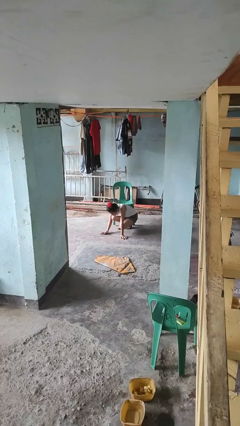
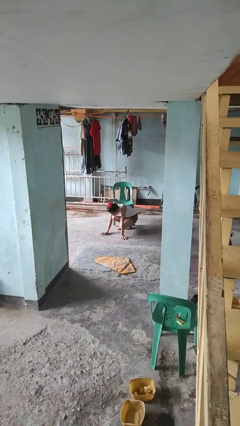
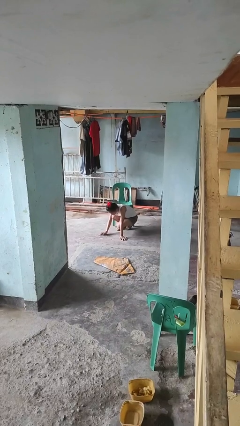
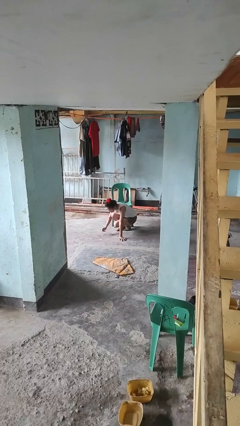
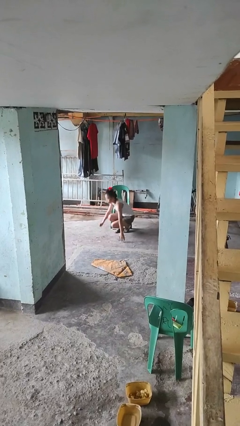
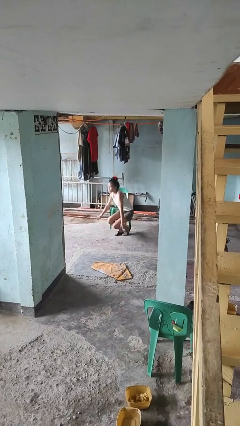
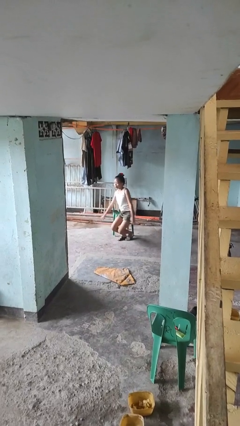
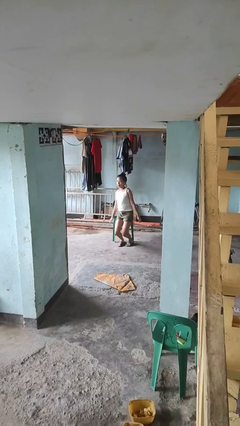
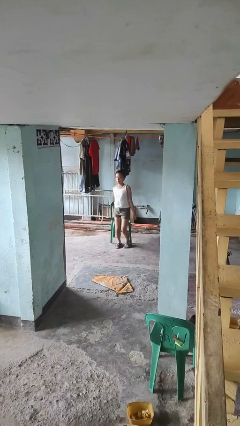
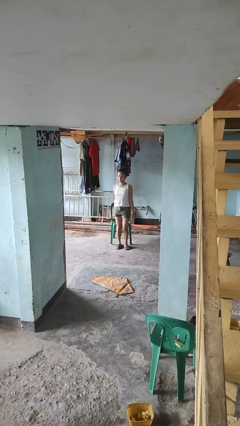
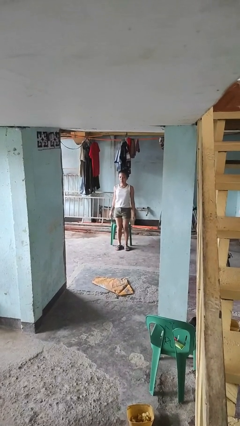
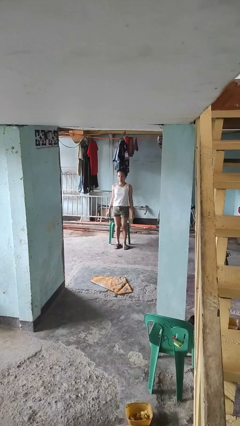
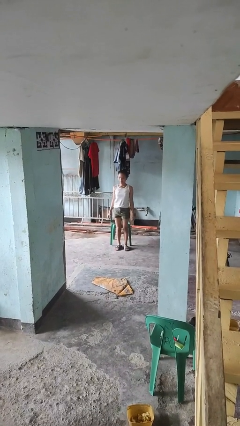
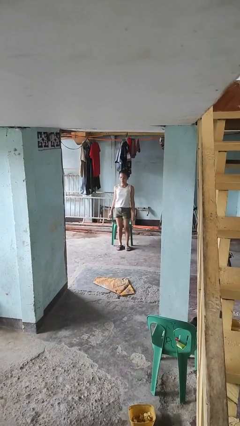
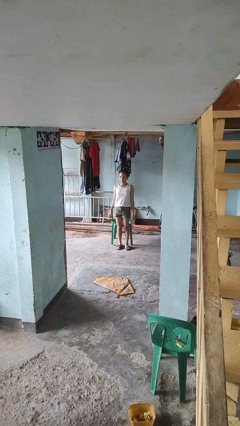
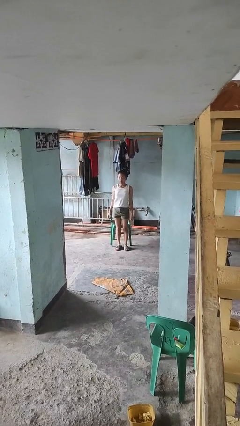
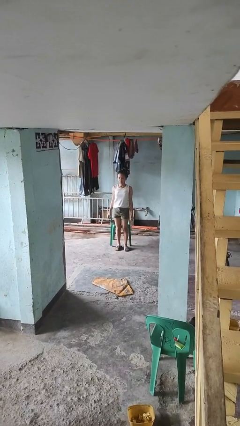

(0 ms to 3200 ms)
person stands up from floor

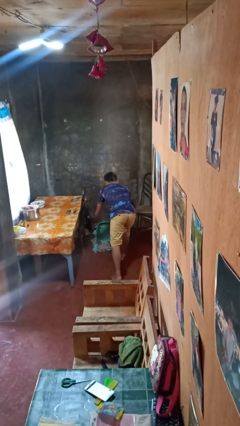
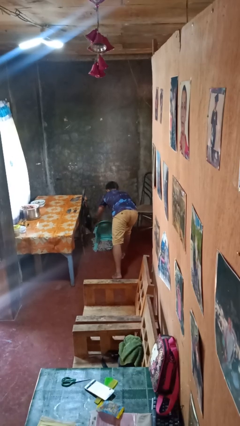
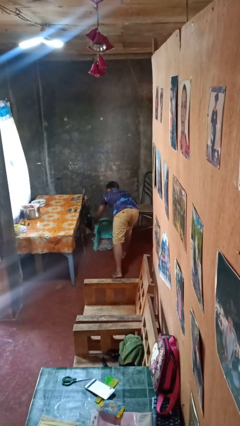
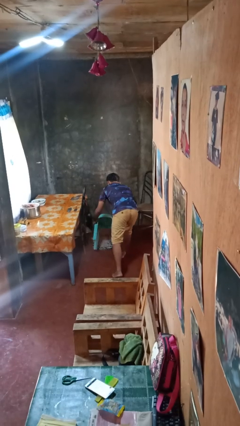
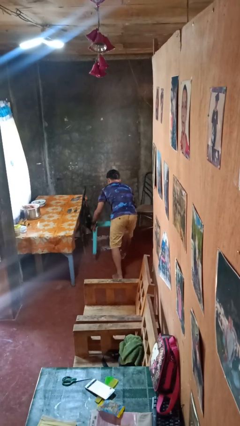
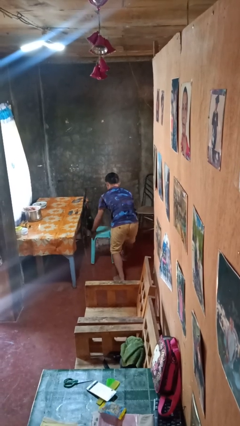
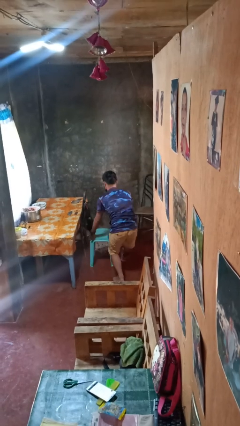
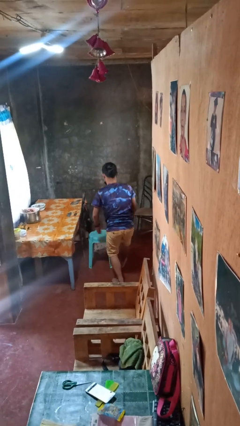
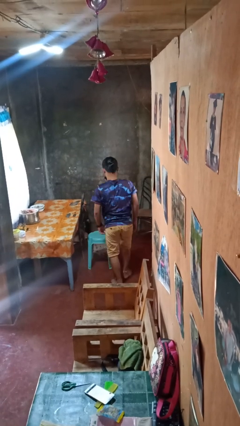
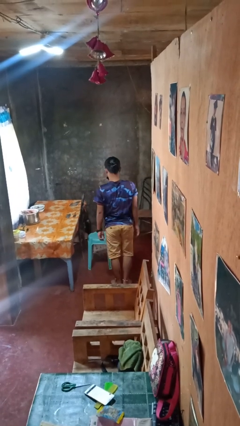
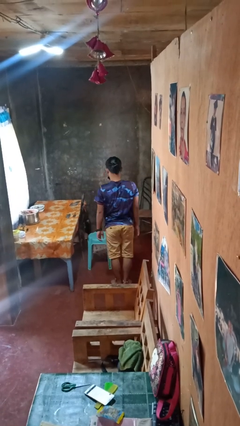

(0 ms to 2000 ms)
person sets upright furniture

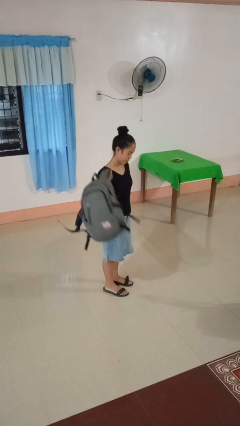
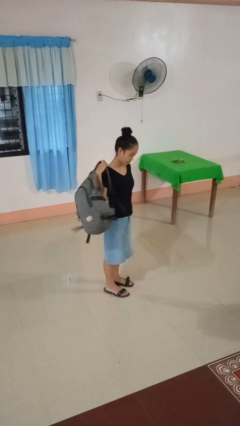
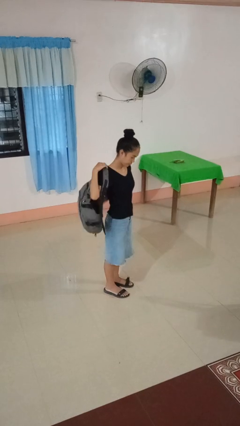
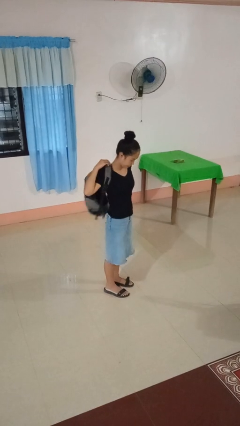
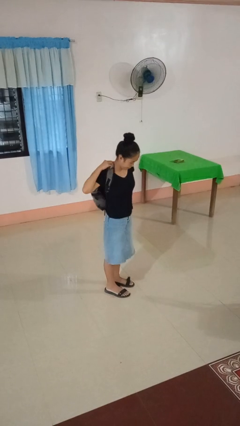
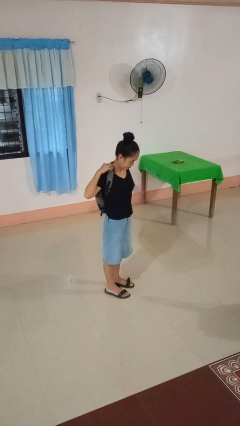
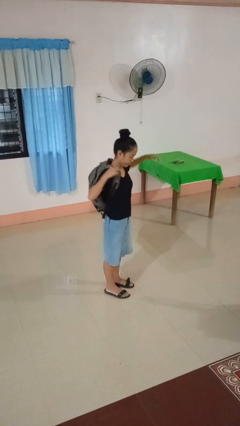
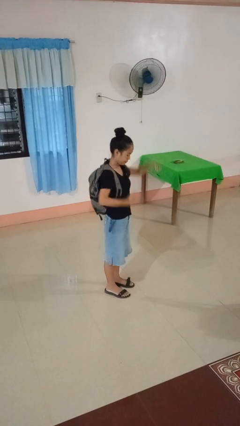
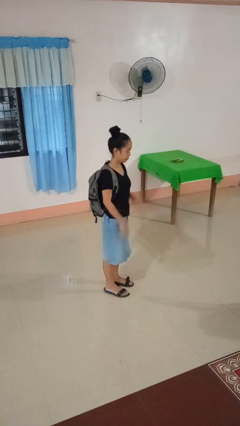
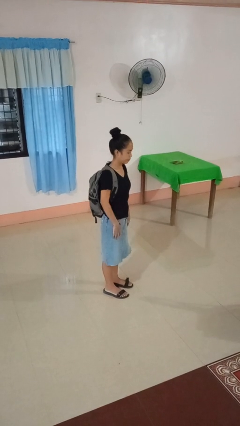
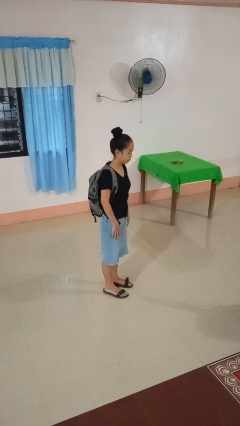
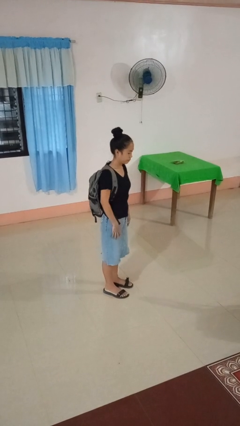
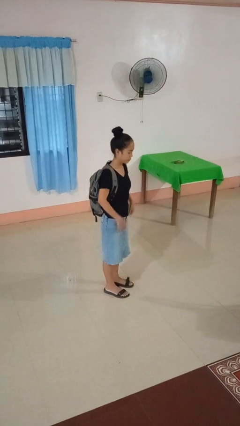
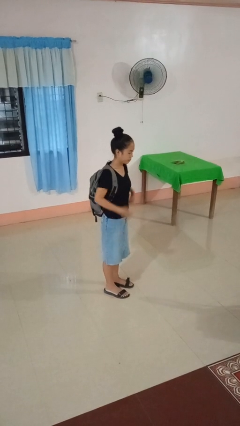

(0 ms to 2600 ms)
person puts on backpack

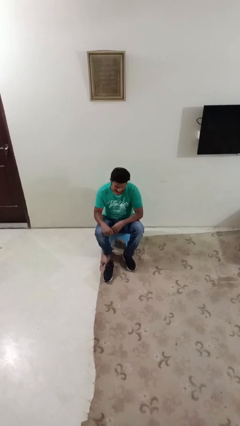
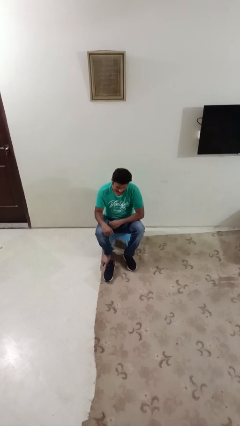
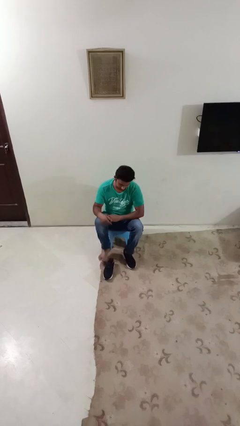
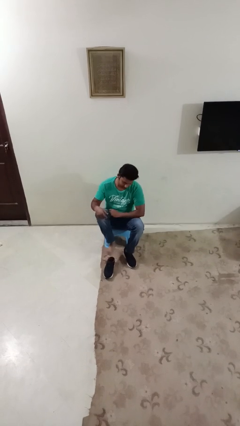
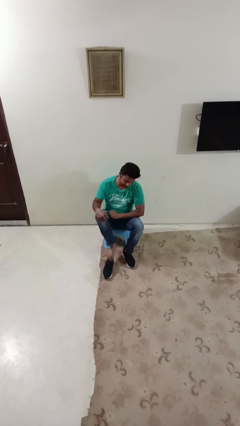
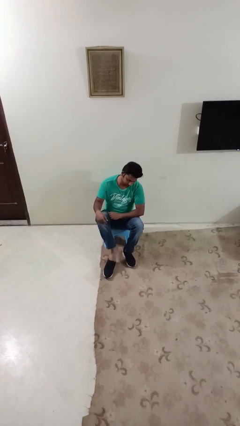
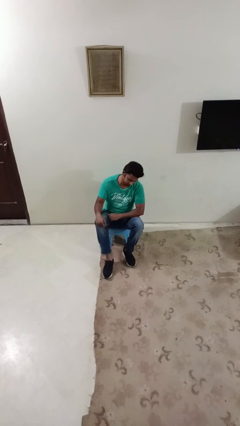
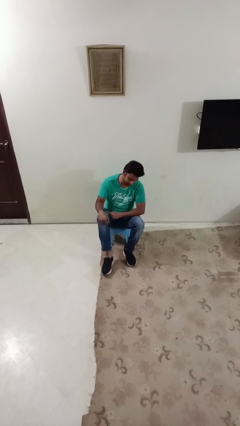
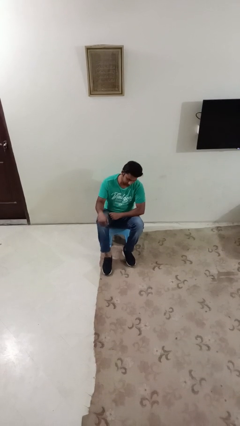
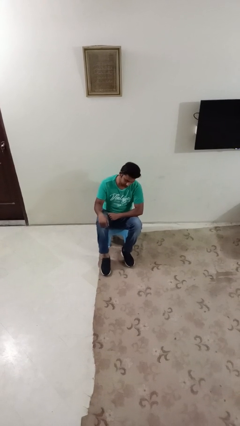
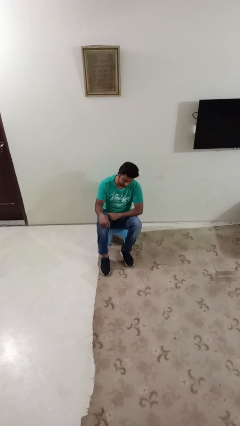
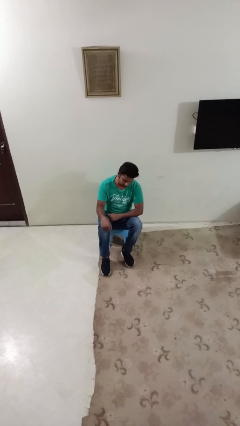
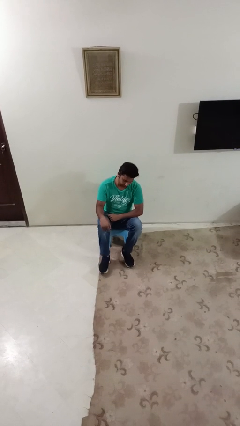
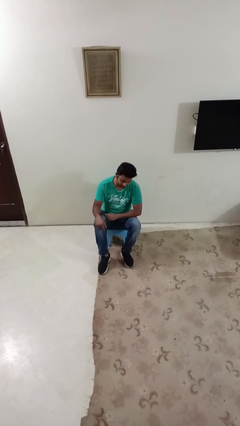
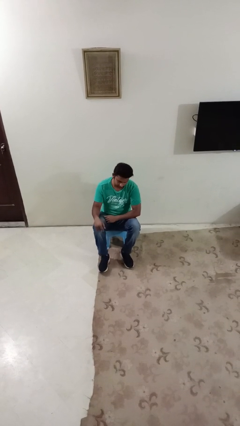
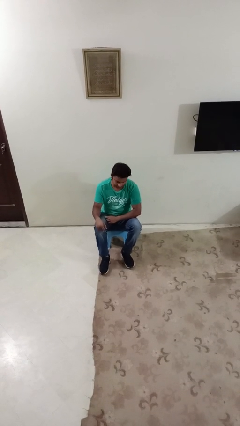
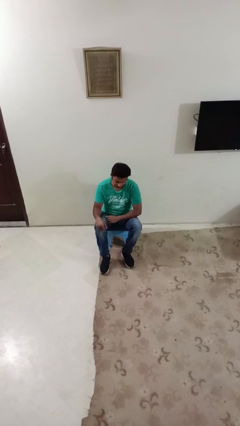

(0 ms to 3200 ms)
person puts on shoes

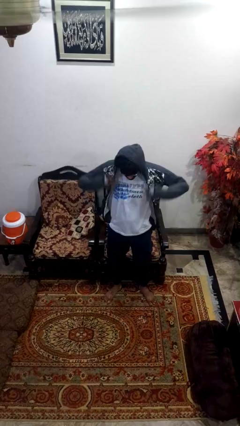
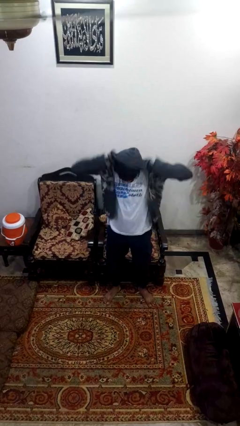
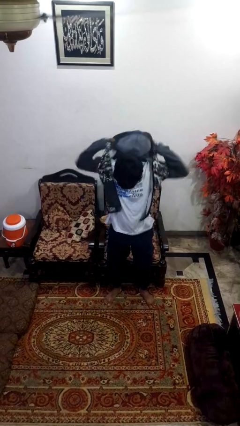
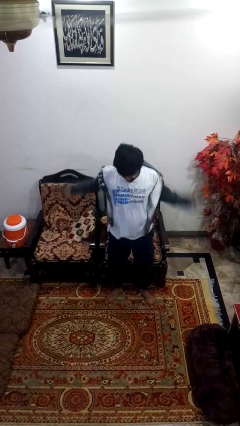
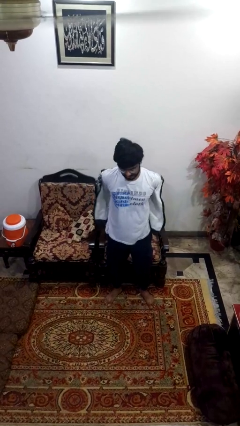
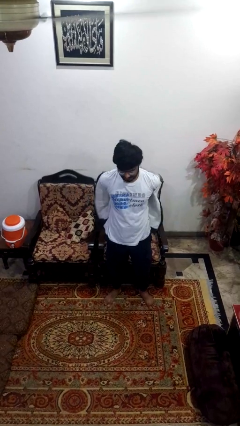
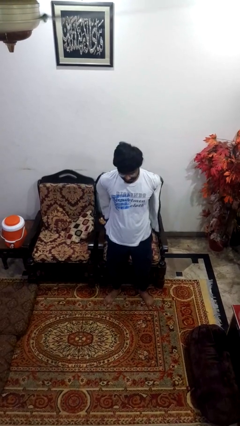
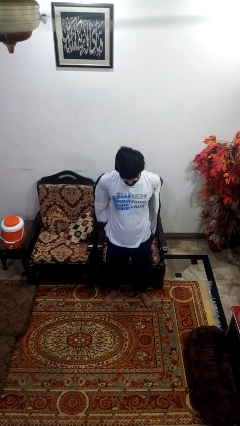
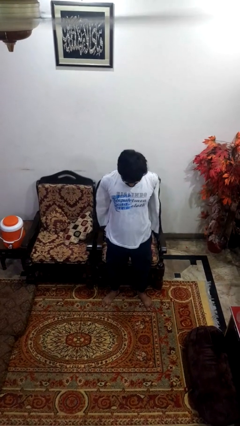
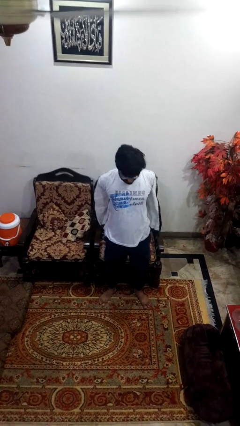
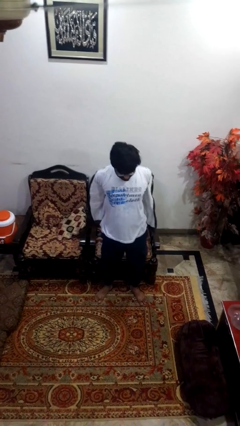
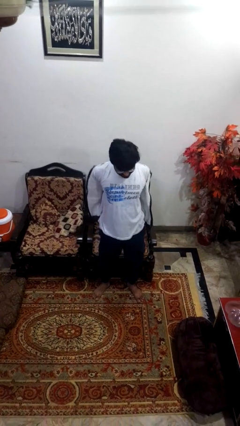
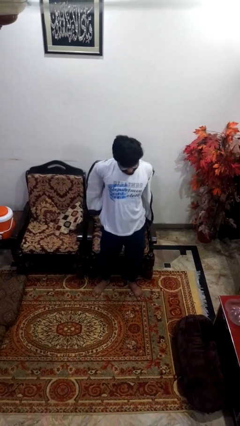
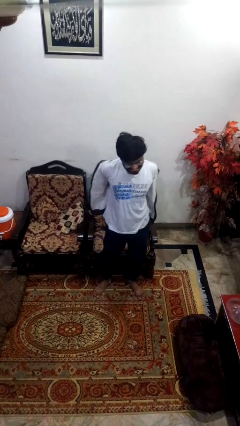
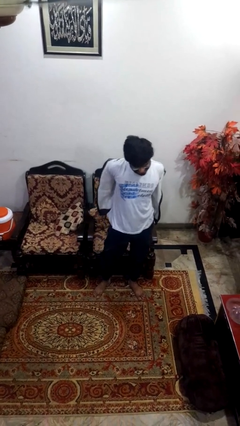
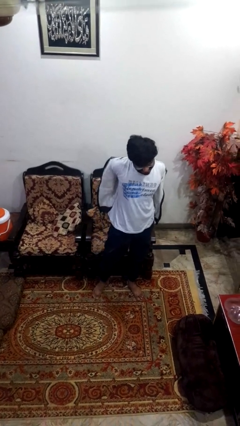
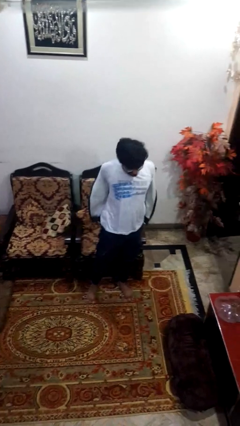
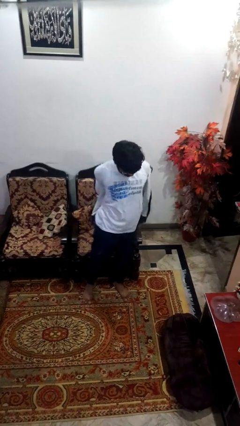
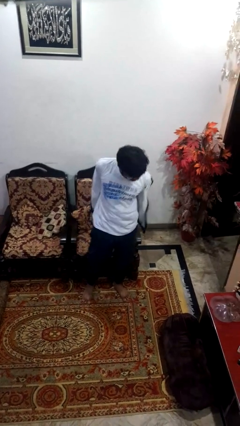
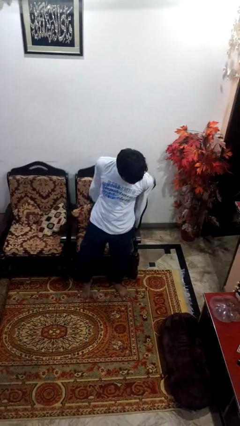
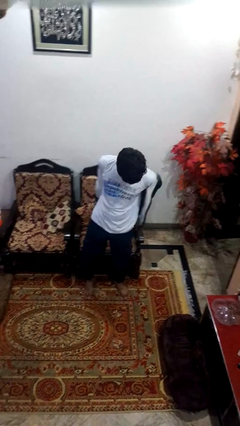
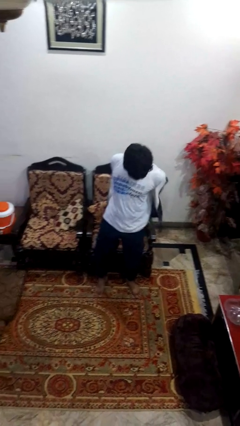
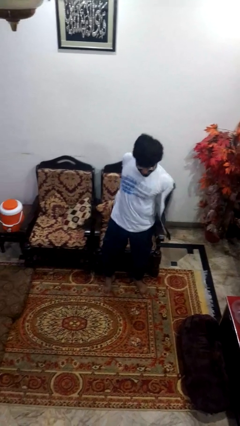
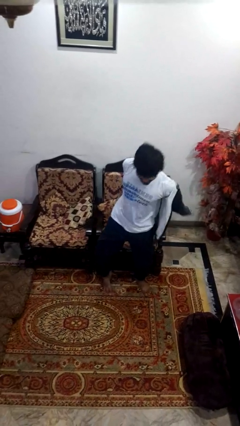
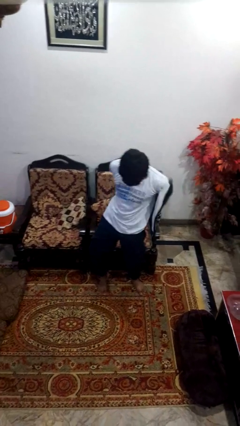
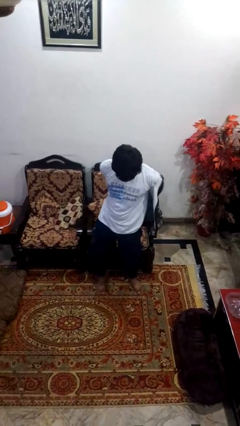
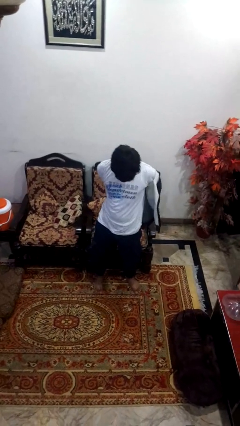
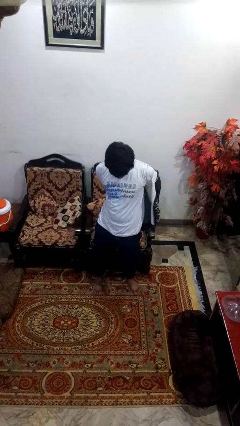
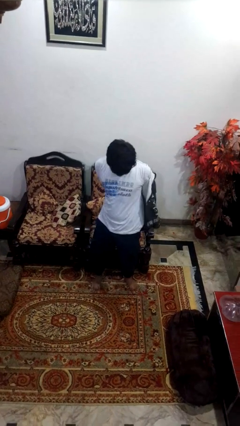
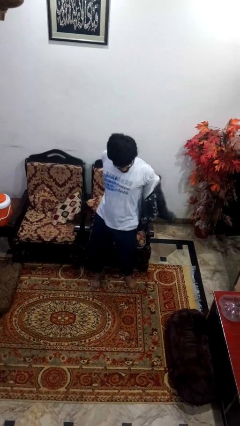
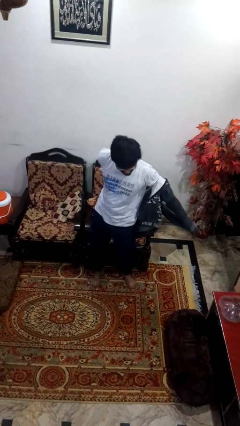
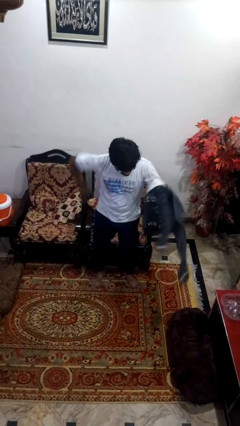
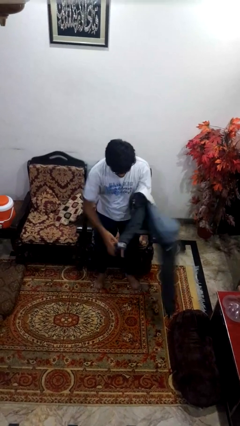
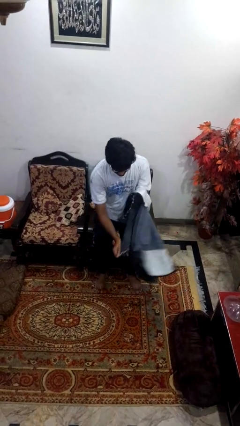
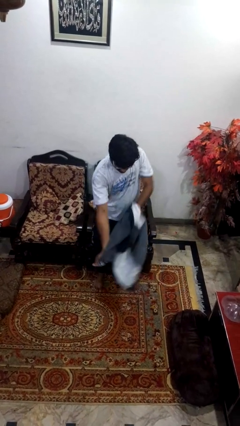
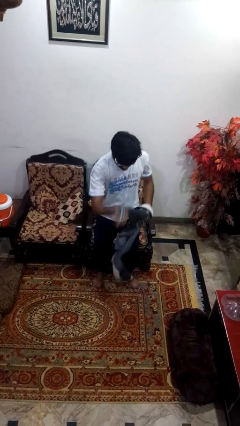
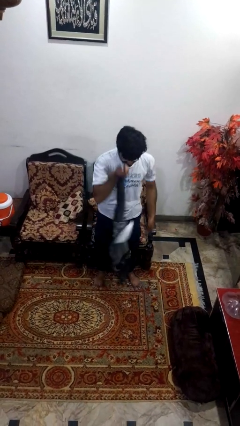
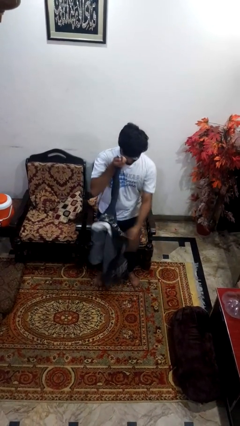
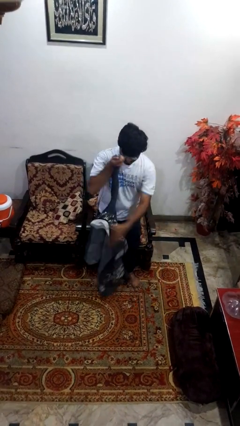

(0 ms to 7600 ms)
person takes off hoodie
